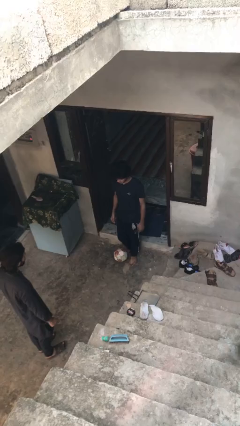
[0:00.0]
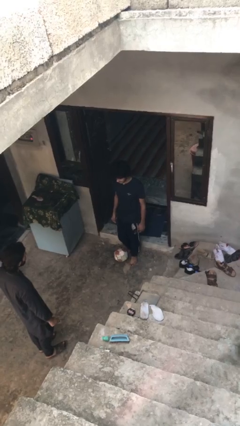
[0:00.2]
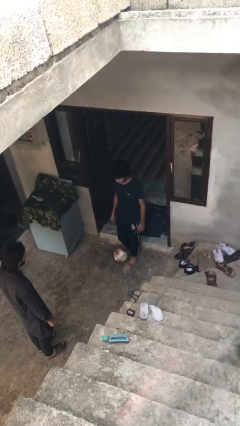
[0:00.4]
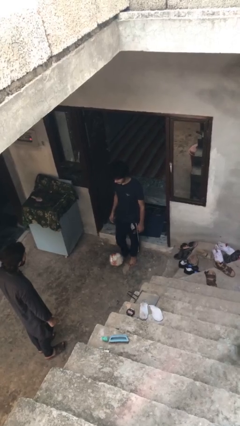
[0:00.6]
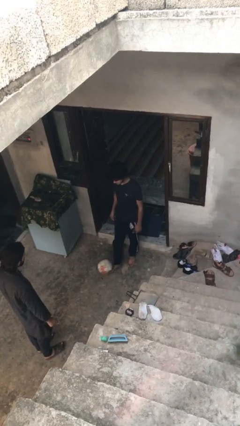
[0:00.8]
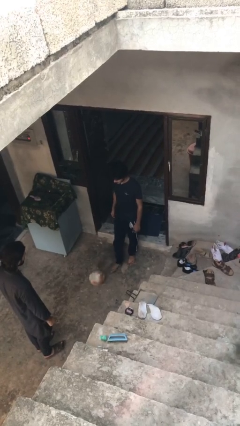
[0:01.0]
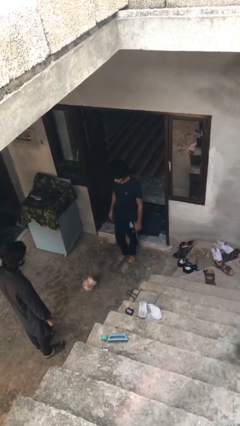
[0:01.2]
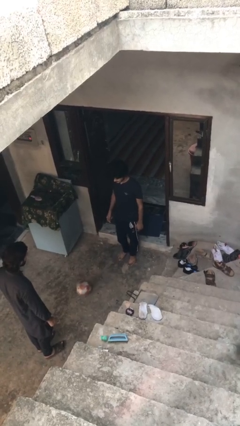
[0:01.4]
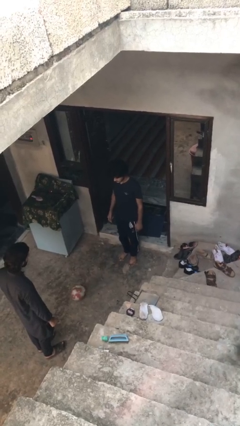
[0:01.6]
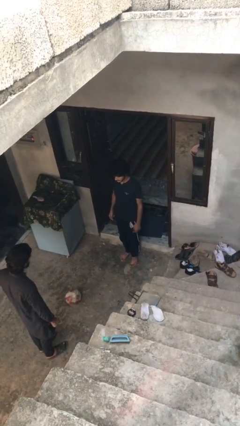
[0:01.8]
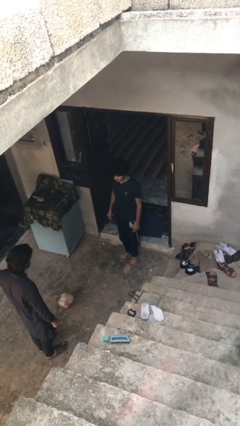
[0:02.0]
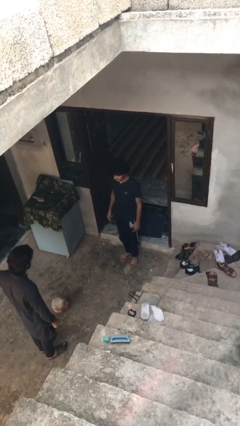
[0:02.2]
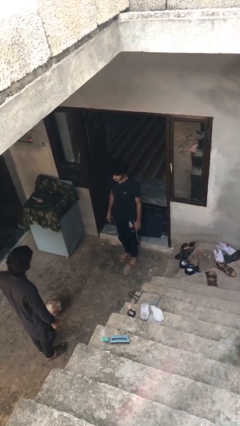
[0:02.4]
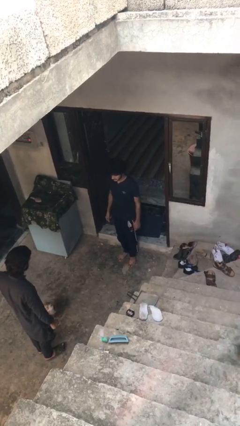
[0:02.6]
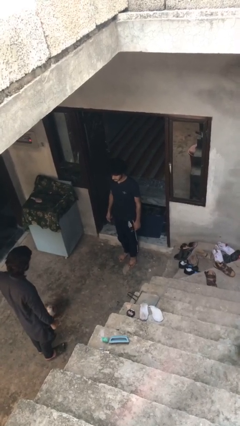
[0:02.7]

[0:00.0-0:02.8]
person kicks object to person

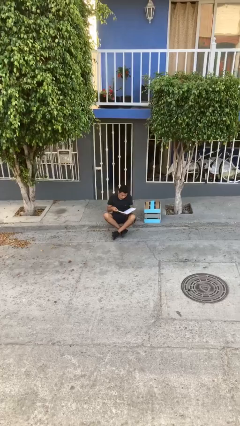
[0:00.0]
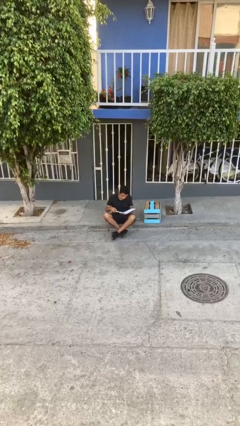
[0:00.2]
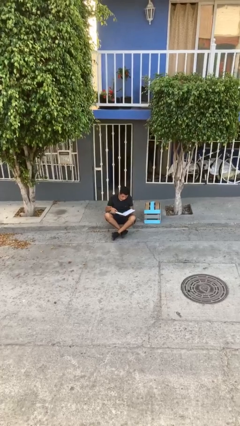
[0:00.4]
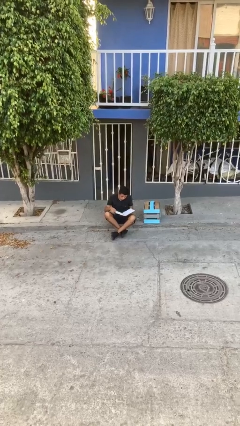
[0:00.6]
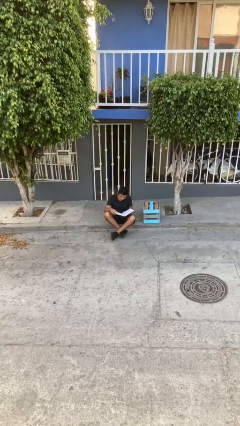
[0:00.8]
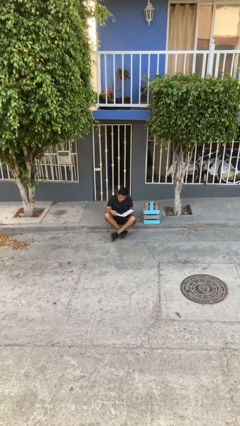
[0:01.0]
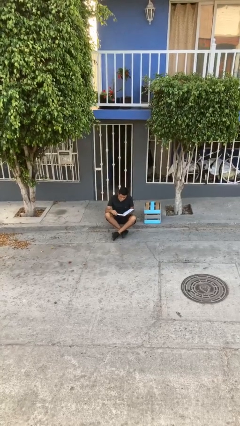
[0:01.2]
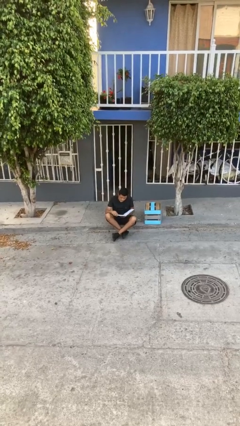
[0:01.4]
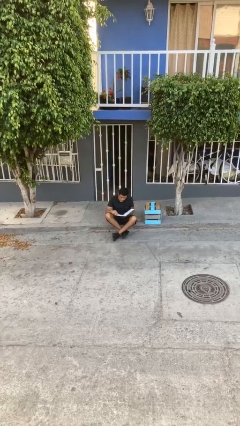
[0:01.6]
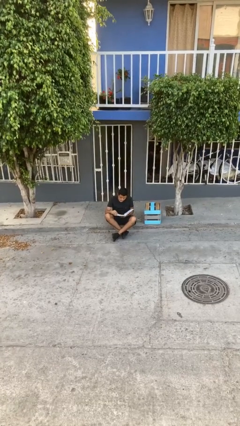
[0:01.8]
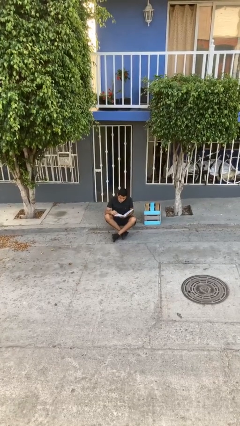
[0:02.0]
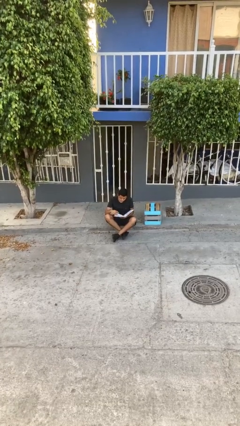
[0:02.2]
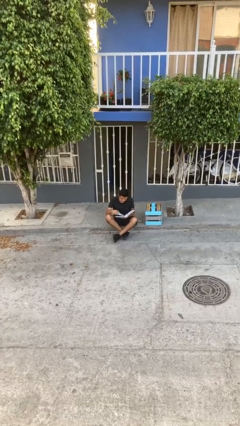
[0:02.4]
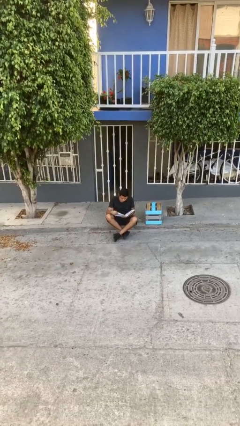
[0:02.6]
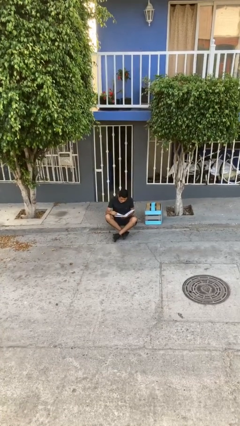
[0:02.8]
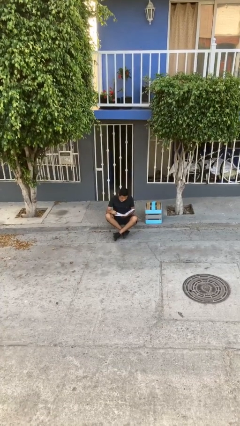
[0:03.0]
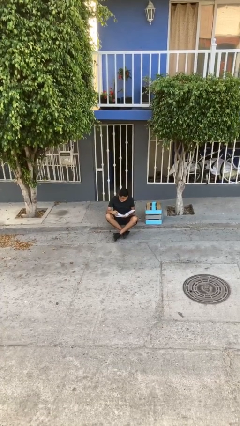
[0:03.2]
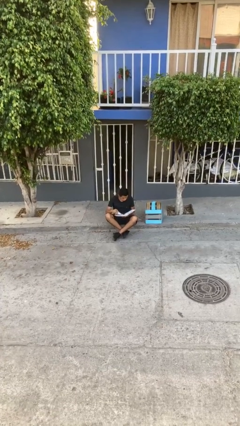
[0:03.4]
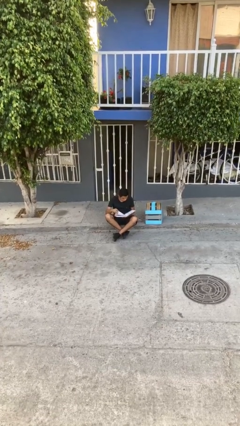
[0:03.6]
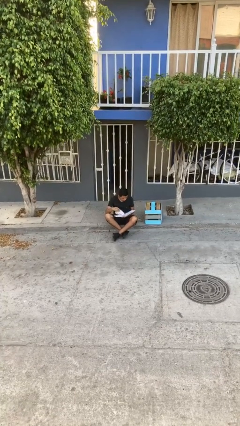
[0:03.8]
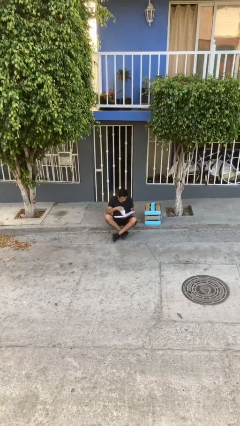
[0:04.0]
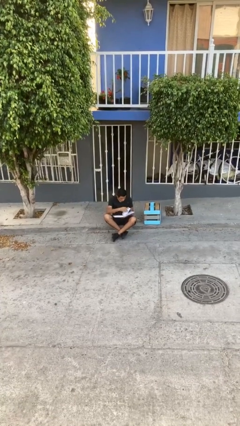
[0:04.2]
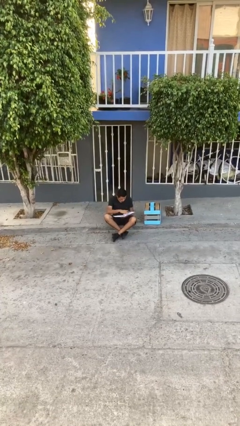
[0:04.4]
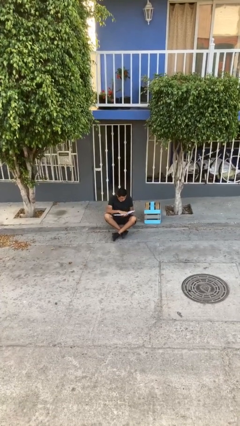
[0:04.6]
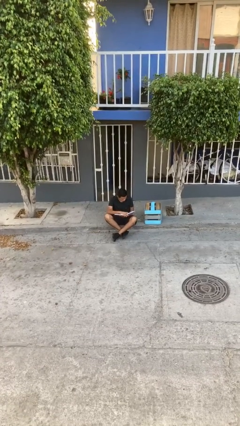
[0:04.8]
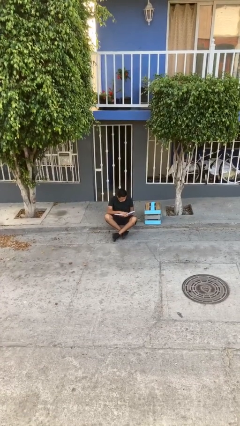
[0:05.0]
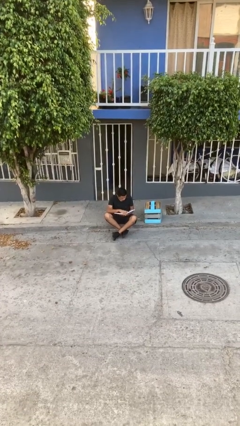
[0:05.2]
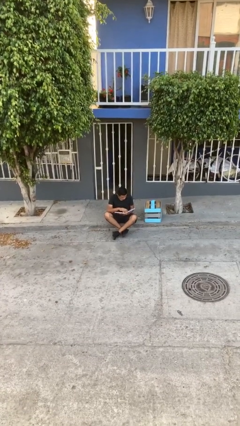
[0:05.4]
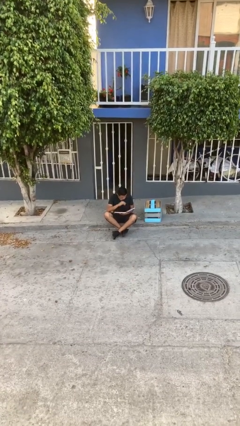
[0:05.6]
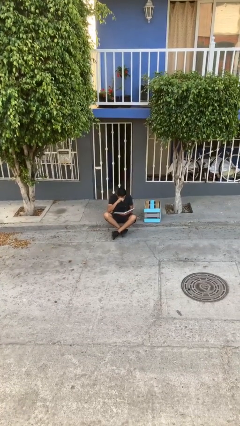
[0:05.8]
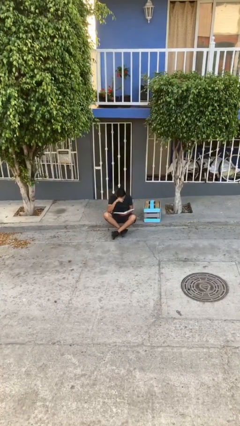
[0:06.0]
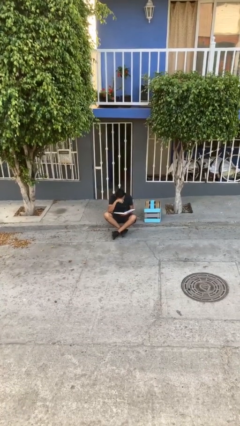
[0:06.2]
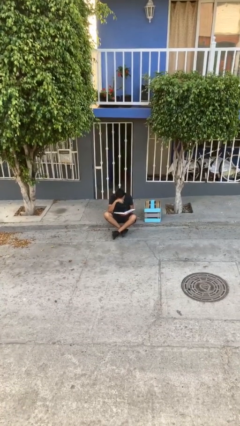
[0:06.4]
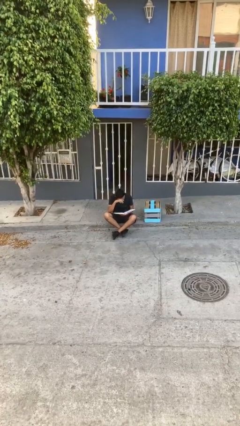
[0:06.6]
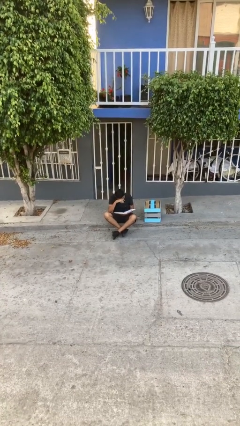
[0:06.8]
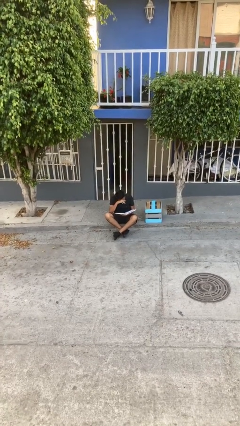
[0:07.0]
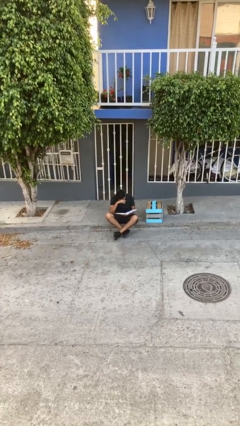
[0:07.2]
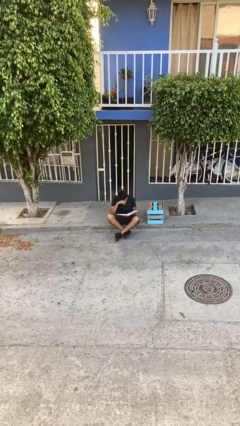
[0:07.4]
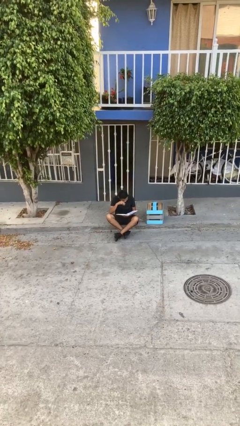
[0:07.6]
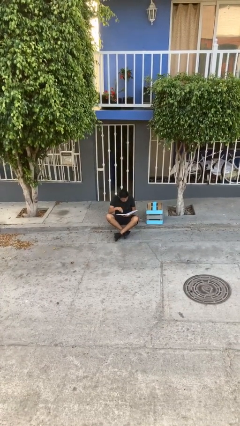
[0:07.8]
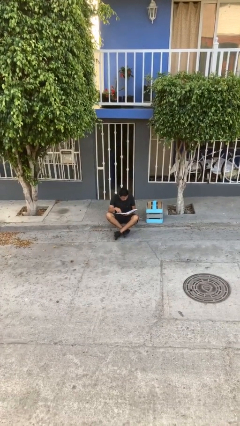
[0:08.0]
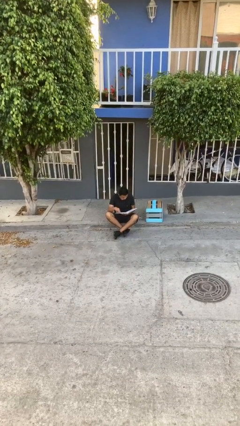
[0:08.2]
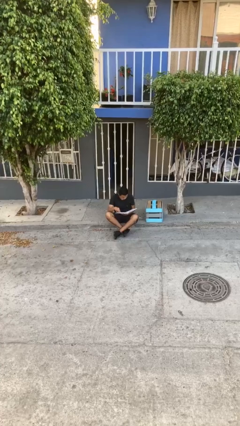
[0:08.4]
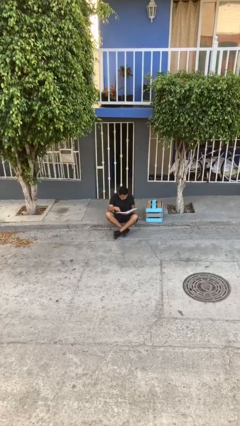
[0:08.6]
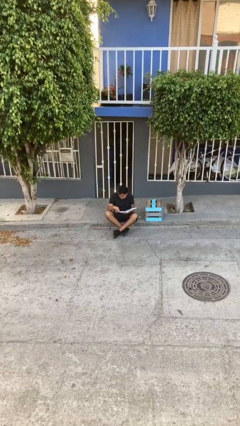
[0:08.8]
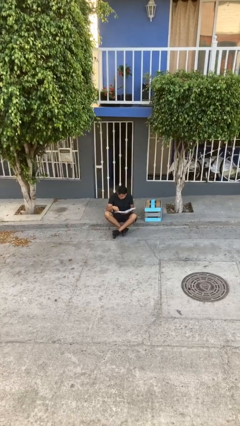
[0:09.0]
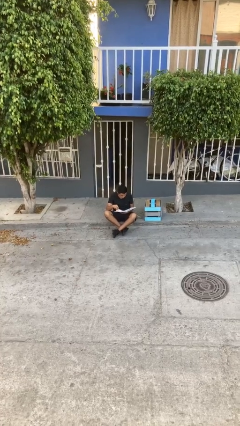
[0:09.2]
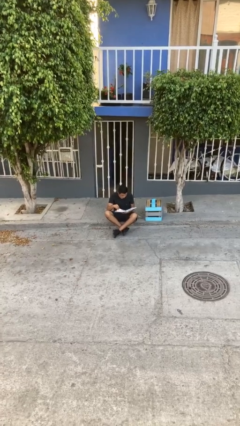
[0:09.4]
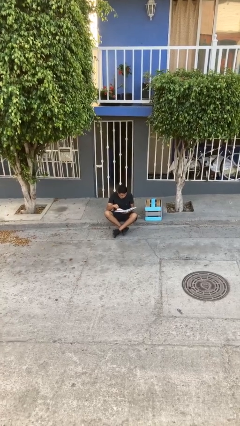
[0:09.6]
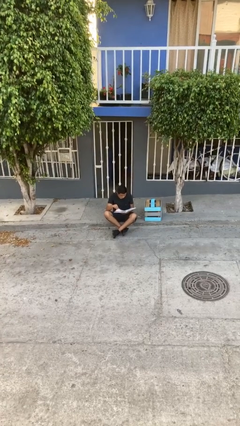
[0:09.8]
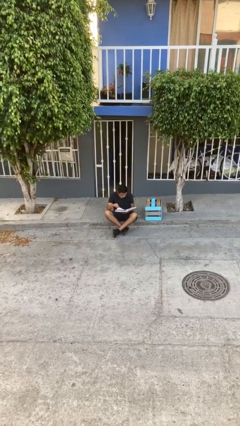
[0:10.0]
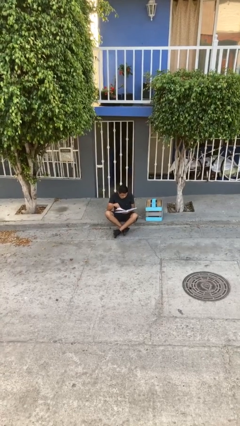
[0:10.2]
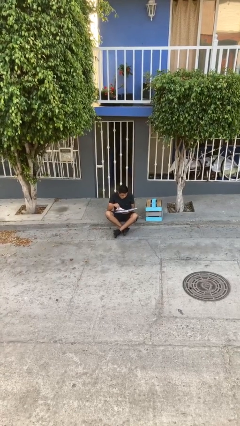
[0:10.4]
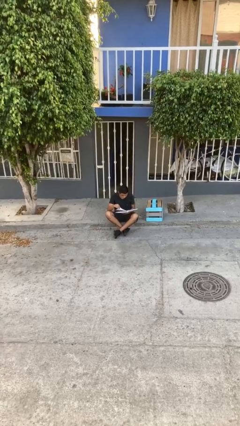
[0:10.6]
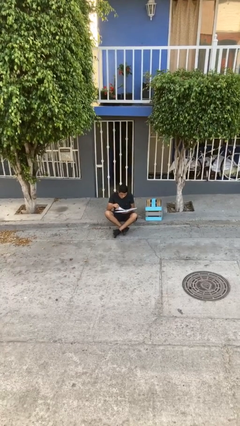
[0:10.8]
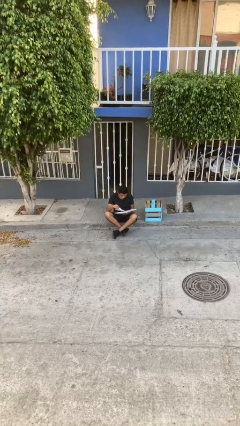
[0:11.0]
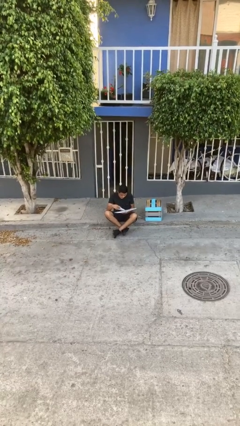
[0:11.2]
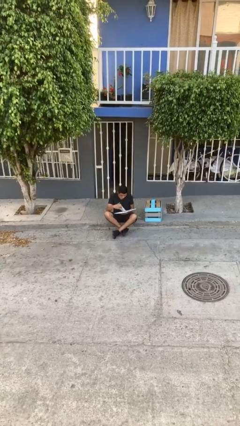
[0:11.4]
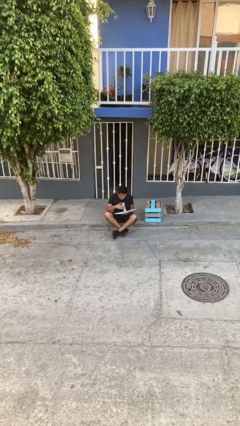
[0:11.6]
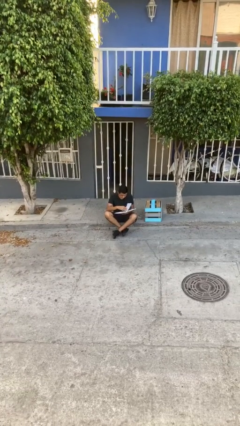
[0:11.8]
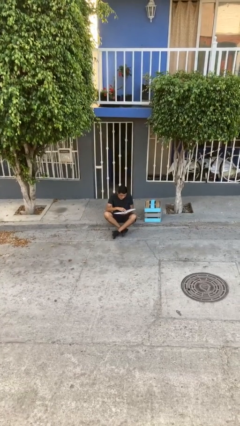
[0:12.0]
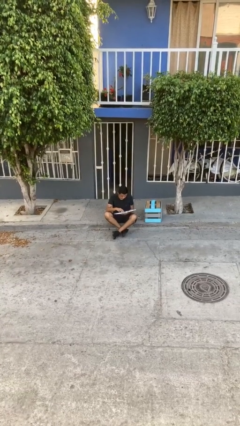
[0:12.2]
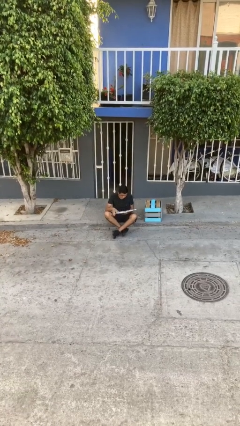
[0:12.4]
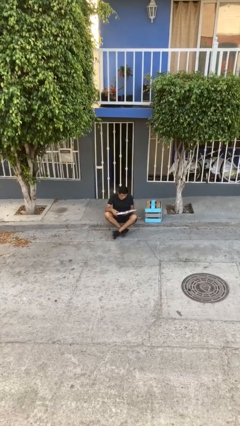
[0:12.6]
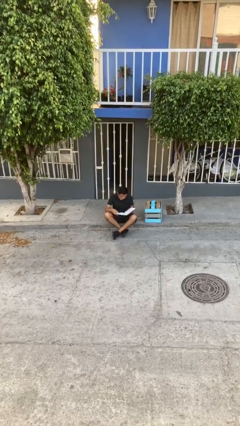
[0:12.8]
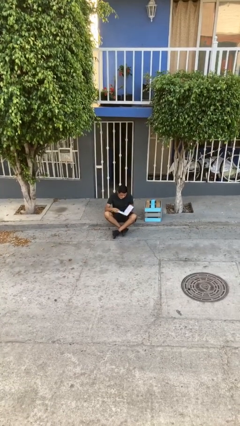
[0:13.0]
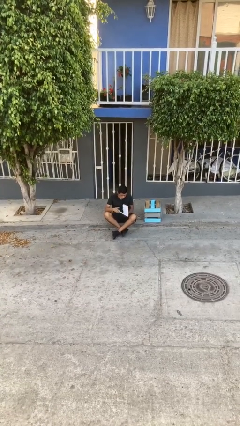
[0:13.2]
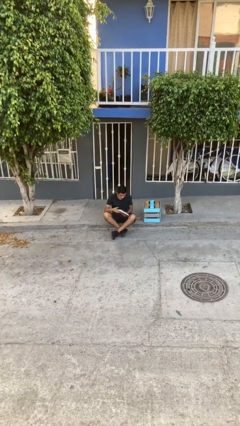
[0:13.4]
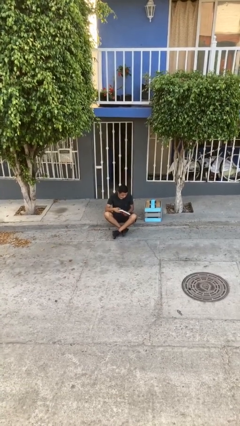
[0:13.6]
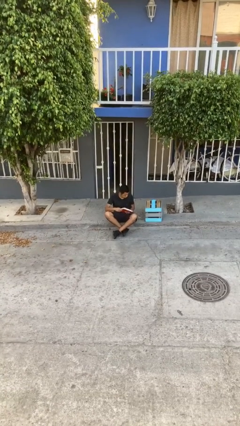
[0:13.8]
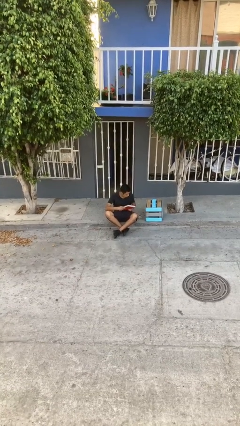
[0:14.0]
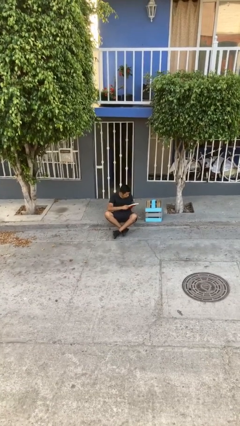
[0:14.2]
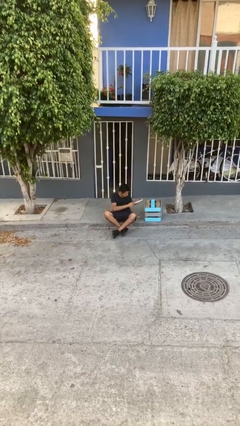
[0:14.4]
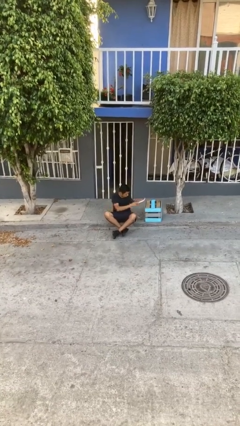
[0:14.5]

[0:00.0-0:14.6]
person reads document

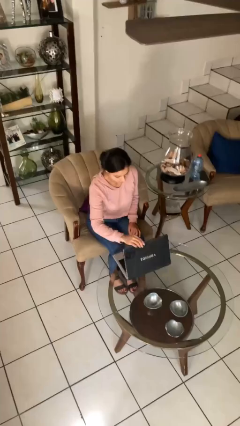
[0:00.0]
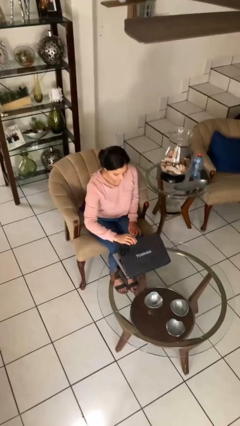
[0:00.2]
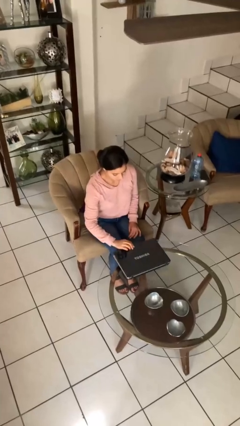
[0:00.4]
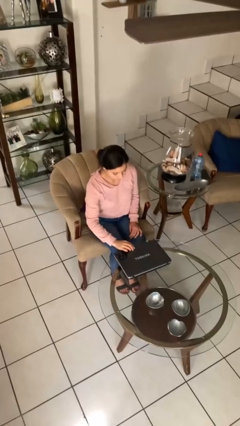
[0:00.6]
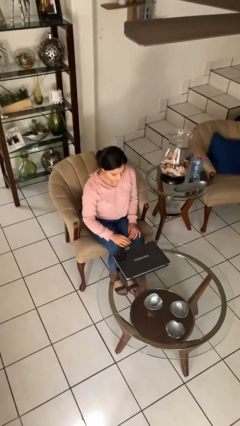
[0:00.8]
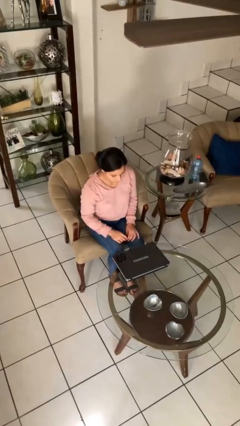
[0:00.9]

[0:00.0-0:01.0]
person closes laptop
